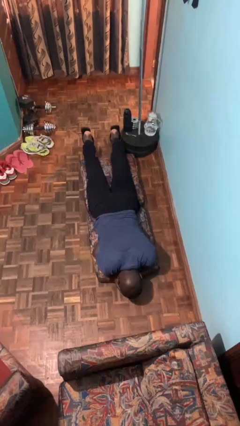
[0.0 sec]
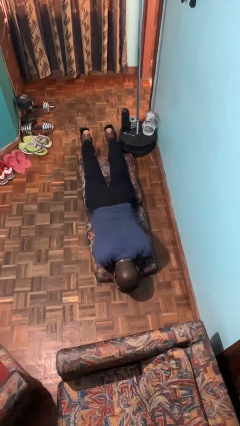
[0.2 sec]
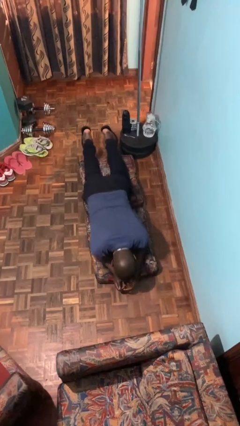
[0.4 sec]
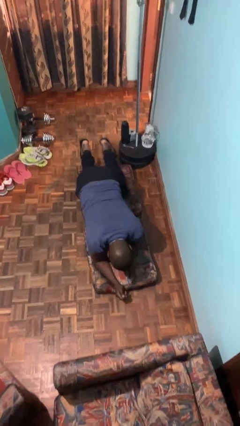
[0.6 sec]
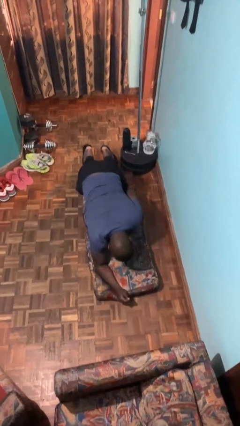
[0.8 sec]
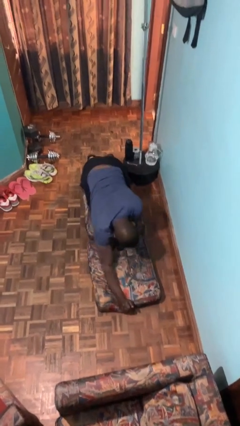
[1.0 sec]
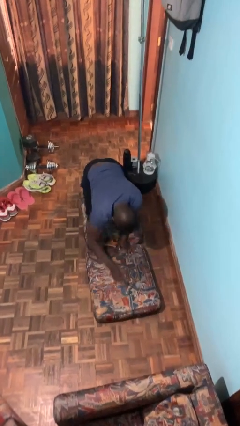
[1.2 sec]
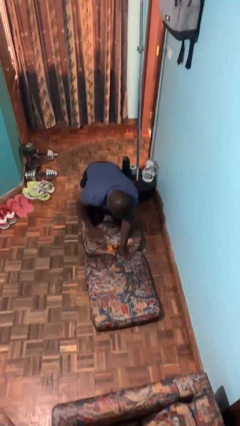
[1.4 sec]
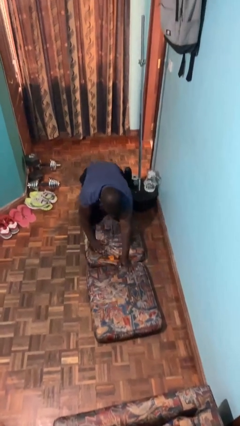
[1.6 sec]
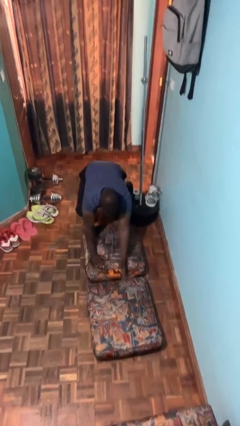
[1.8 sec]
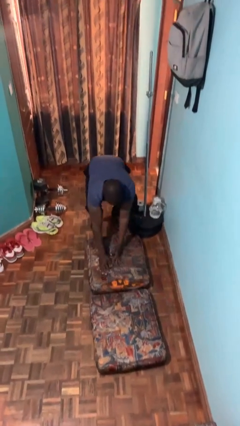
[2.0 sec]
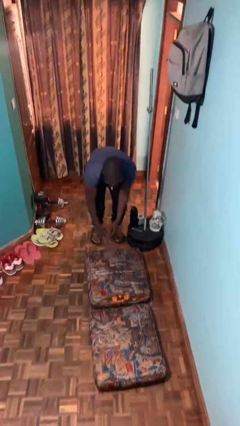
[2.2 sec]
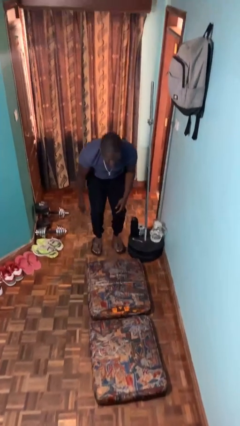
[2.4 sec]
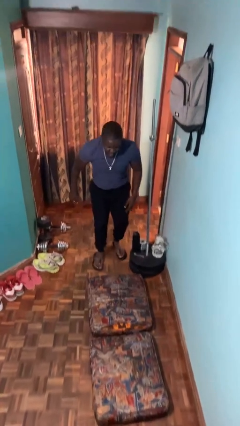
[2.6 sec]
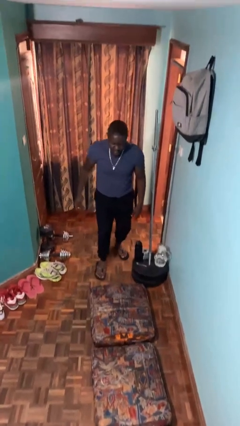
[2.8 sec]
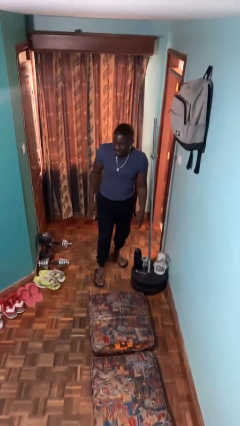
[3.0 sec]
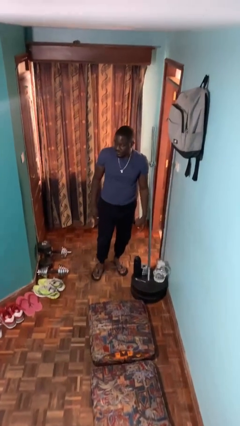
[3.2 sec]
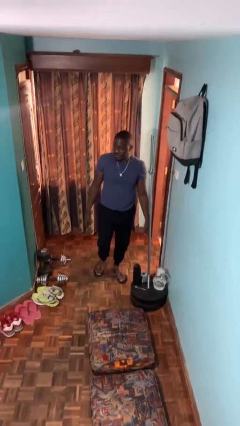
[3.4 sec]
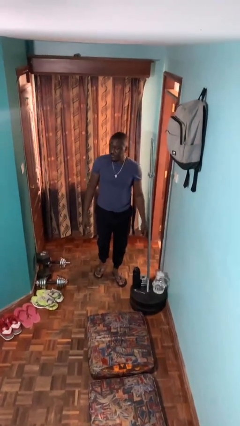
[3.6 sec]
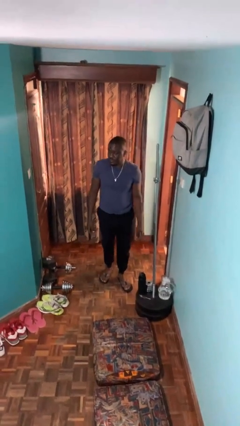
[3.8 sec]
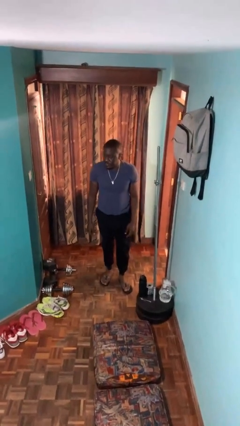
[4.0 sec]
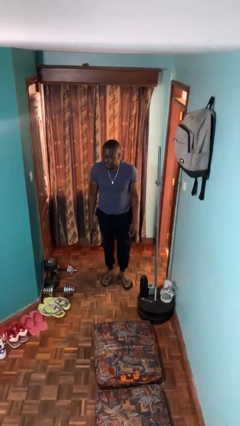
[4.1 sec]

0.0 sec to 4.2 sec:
person stands up from floor

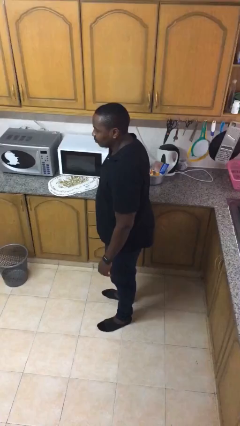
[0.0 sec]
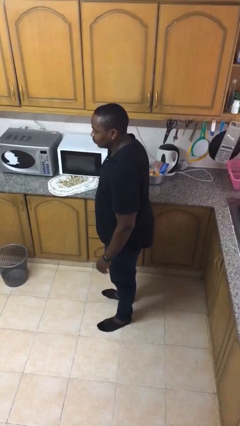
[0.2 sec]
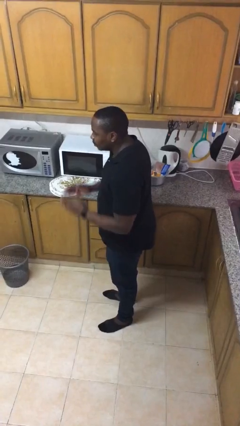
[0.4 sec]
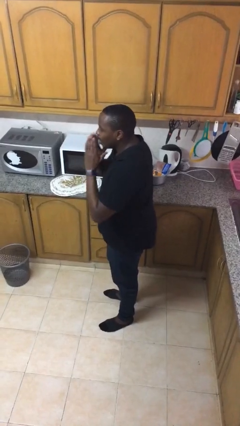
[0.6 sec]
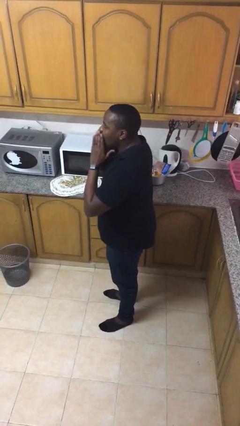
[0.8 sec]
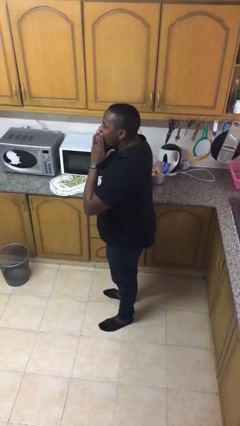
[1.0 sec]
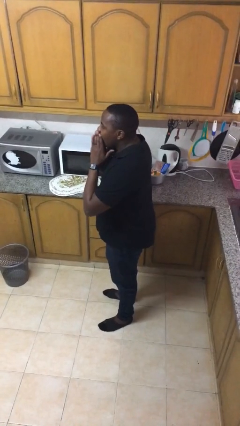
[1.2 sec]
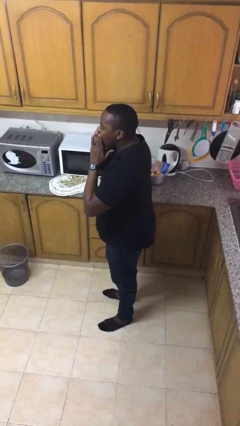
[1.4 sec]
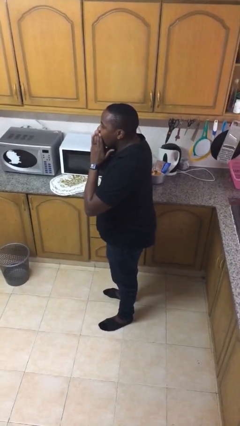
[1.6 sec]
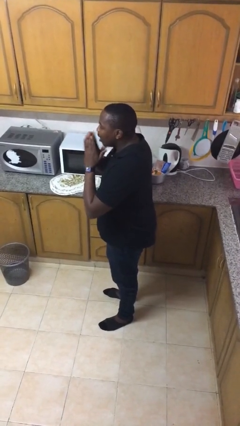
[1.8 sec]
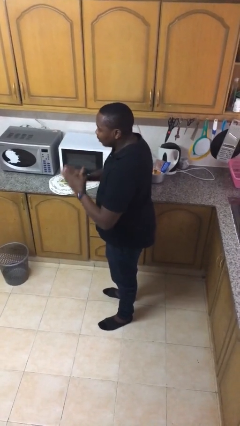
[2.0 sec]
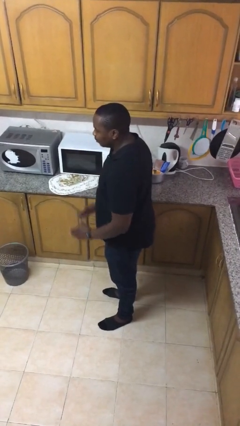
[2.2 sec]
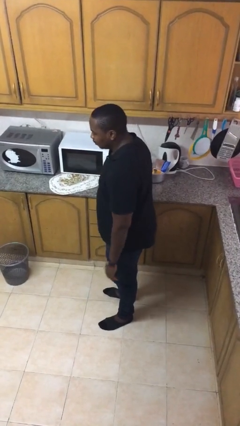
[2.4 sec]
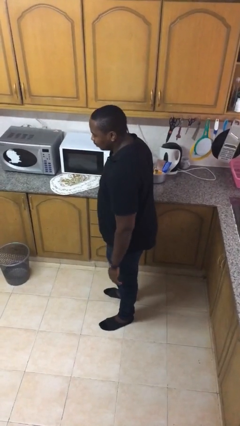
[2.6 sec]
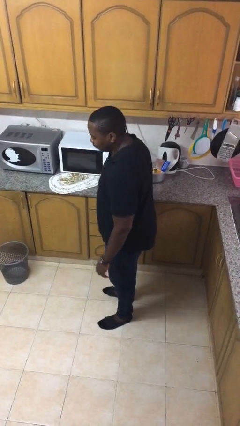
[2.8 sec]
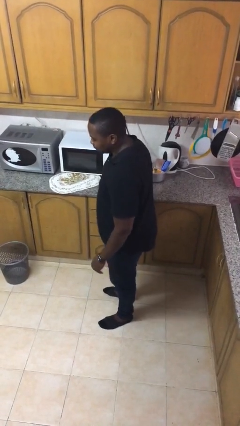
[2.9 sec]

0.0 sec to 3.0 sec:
person yawns

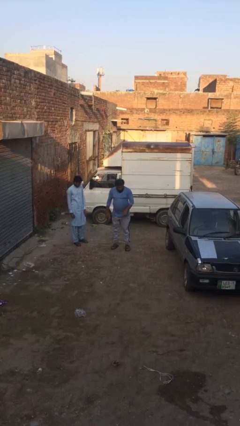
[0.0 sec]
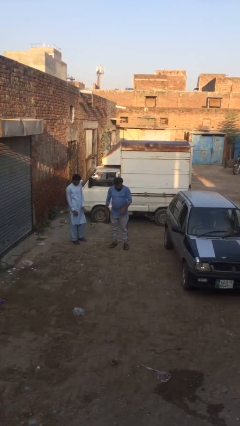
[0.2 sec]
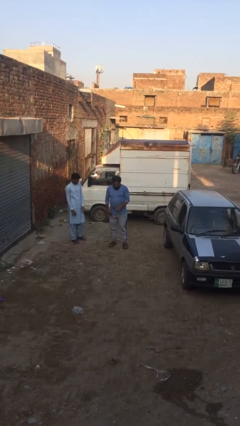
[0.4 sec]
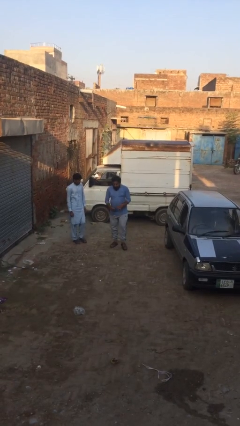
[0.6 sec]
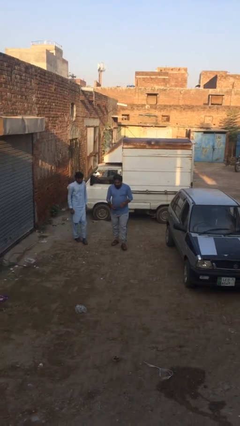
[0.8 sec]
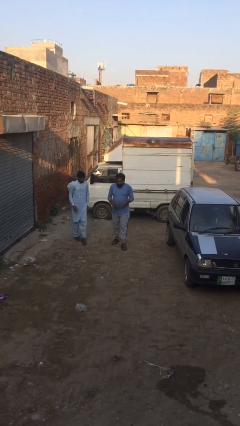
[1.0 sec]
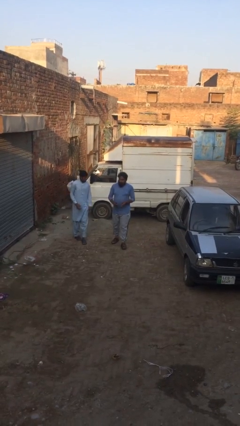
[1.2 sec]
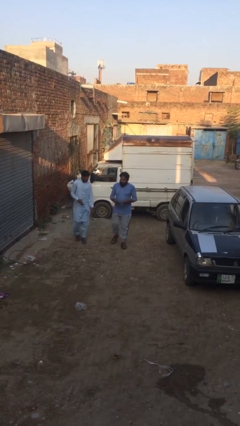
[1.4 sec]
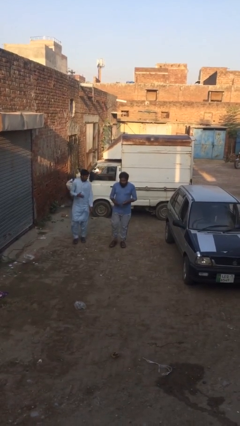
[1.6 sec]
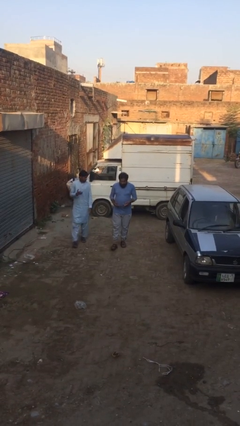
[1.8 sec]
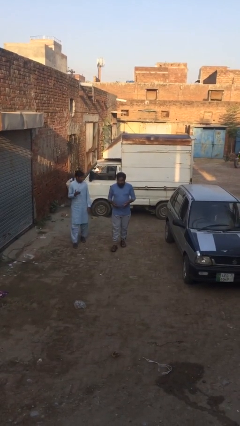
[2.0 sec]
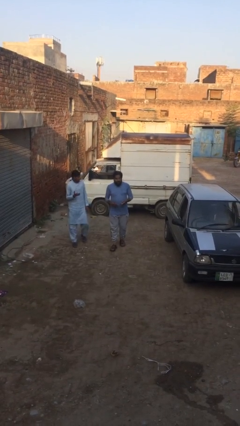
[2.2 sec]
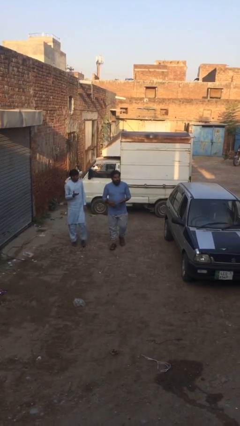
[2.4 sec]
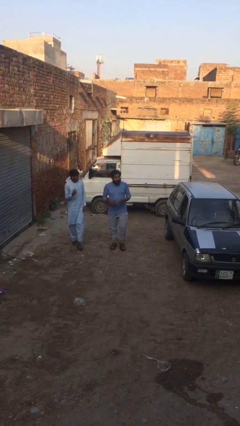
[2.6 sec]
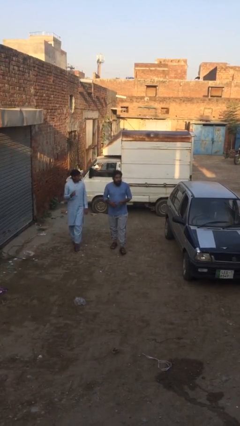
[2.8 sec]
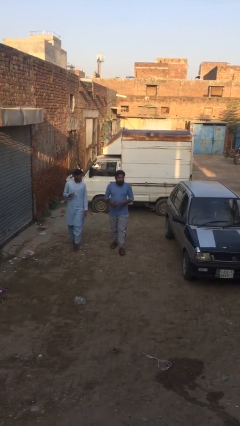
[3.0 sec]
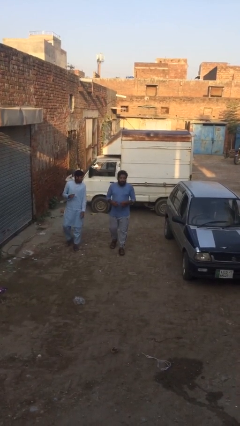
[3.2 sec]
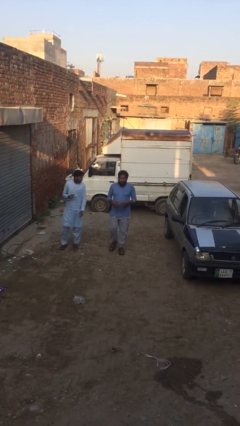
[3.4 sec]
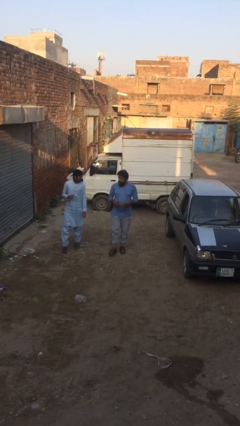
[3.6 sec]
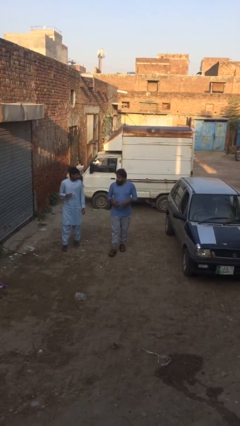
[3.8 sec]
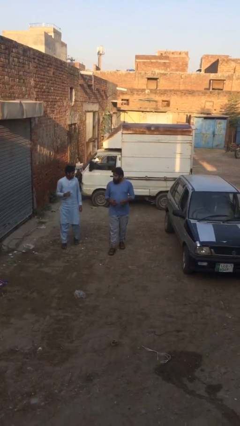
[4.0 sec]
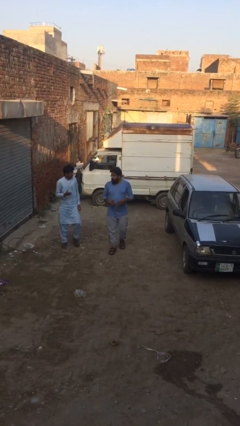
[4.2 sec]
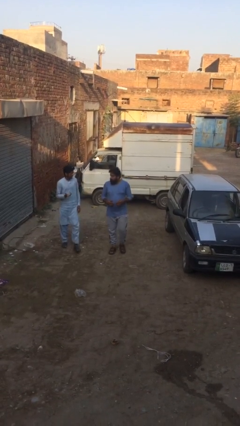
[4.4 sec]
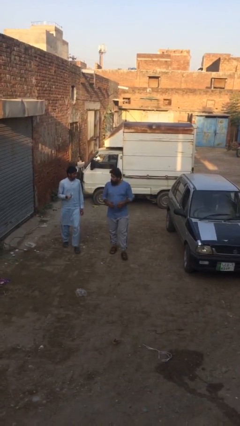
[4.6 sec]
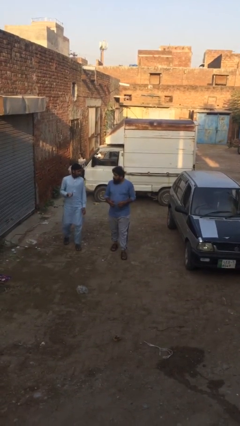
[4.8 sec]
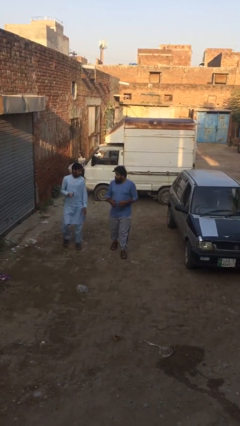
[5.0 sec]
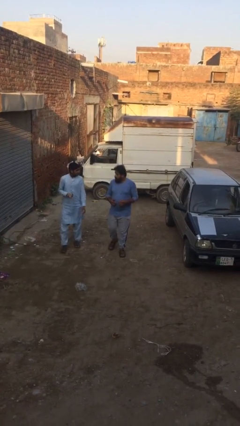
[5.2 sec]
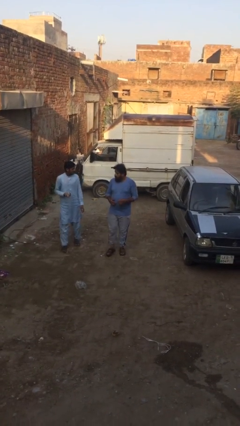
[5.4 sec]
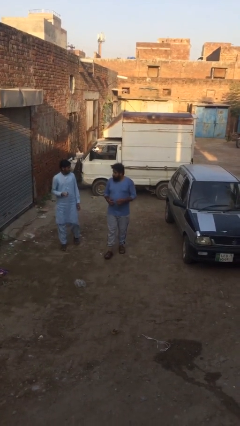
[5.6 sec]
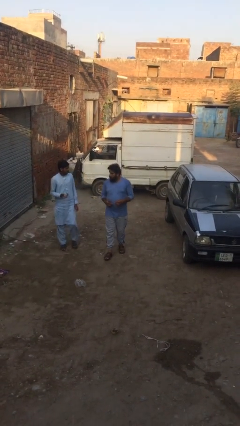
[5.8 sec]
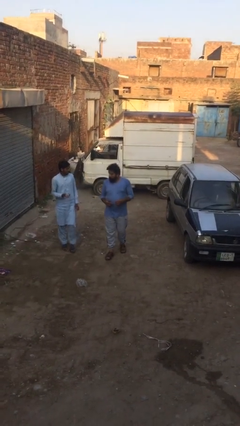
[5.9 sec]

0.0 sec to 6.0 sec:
person talks to person

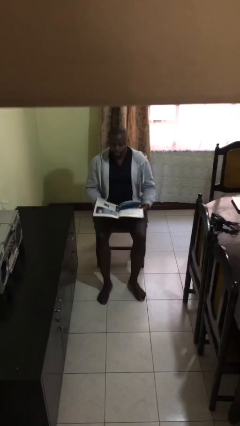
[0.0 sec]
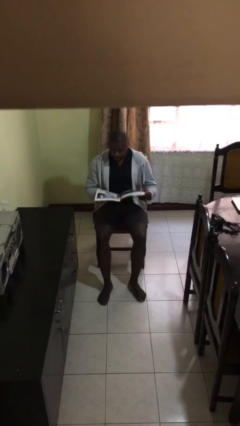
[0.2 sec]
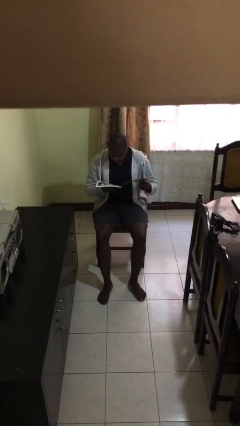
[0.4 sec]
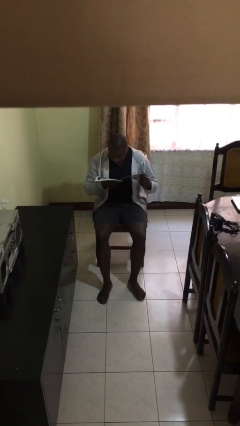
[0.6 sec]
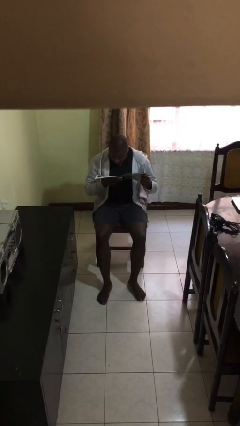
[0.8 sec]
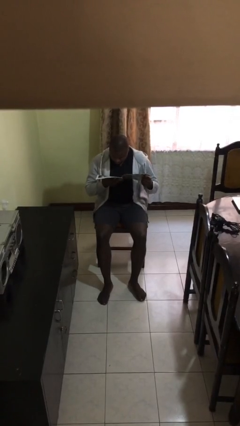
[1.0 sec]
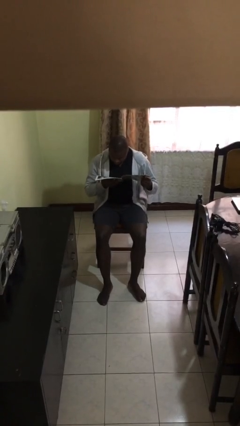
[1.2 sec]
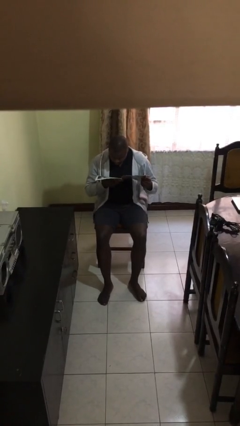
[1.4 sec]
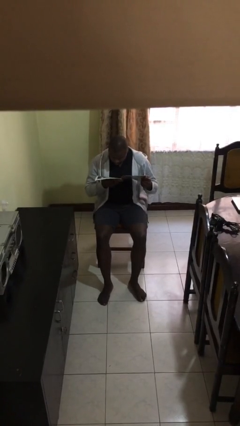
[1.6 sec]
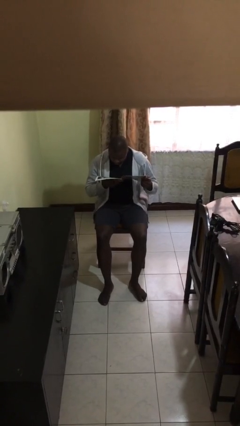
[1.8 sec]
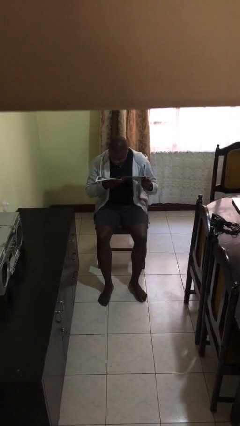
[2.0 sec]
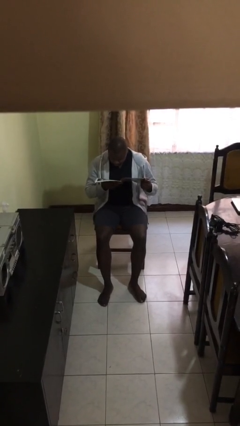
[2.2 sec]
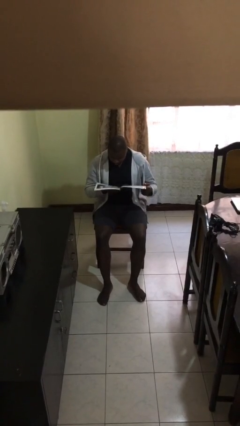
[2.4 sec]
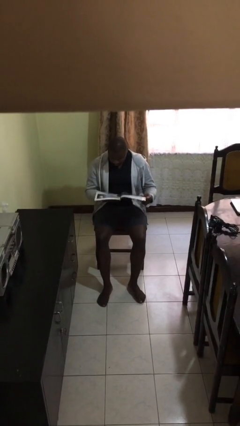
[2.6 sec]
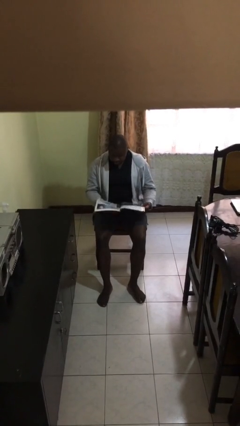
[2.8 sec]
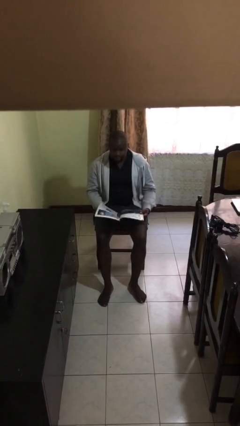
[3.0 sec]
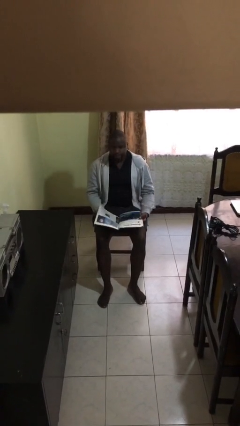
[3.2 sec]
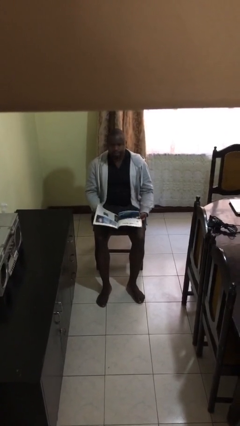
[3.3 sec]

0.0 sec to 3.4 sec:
person reads document

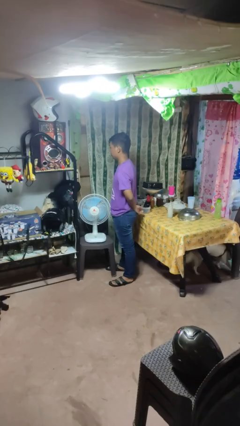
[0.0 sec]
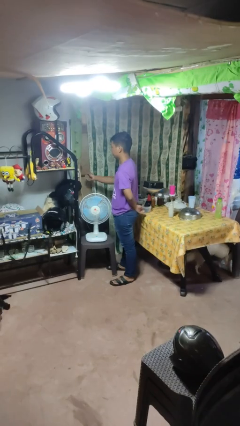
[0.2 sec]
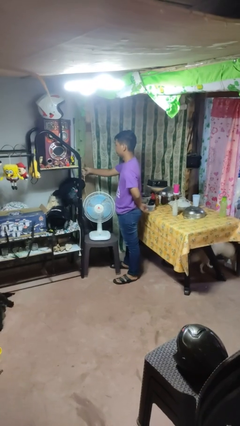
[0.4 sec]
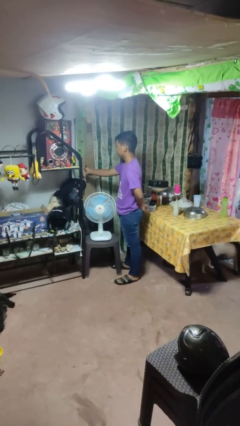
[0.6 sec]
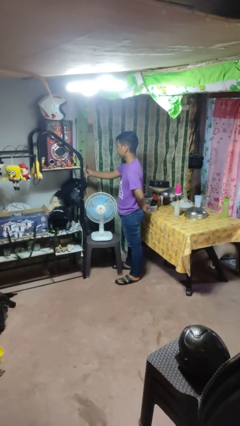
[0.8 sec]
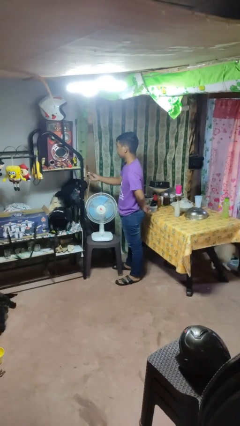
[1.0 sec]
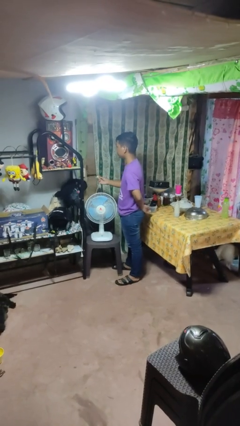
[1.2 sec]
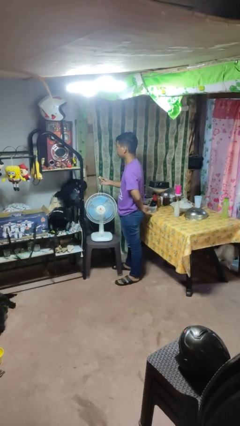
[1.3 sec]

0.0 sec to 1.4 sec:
person unplugs from electrical socket
